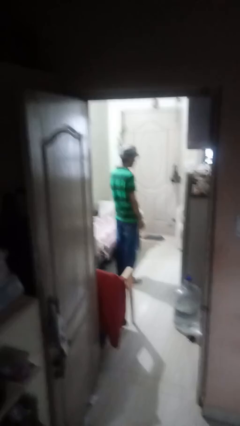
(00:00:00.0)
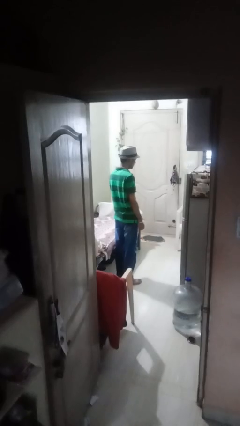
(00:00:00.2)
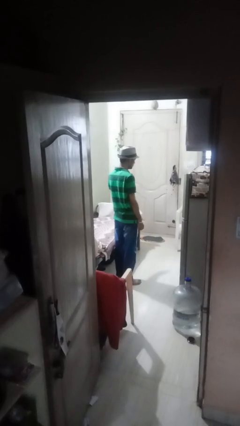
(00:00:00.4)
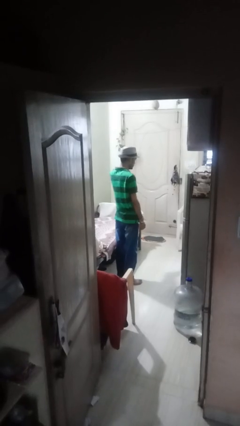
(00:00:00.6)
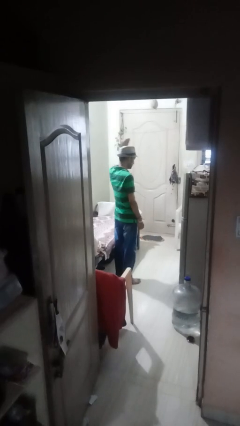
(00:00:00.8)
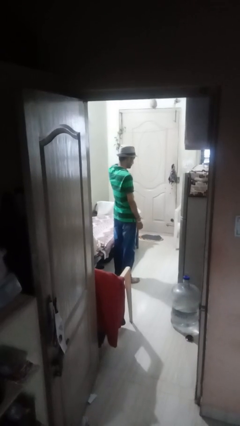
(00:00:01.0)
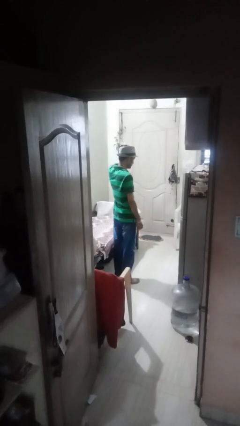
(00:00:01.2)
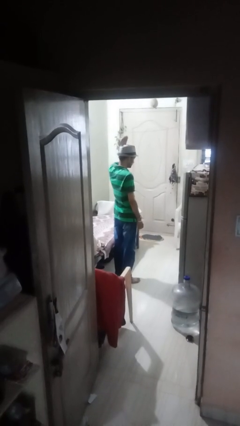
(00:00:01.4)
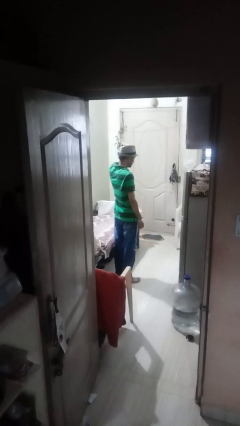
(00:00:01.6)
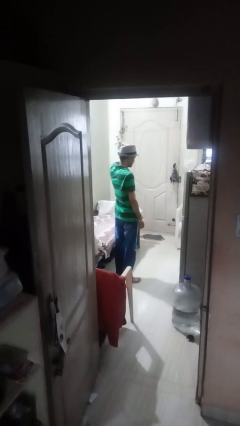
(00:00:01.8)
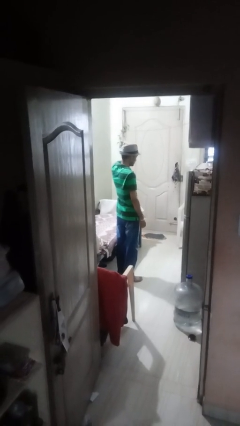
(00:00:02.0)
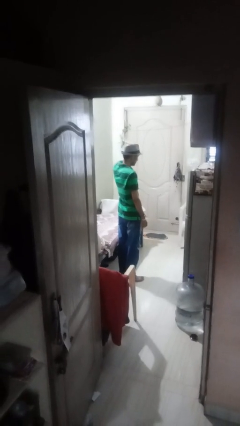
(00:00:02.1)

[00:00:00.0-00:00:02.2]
person pats head

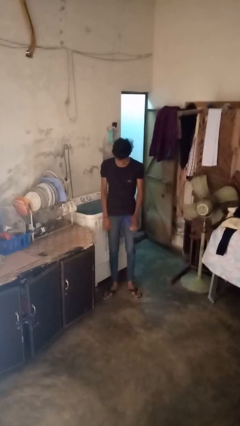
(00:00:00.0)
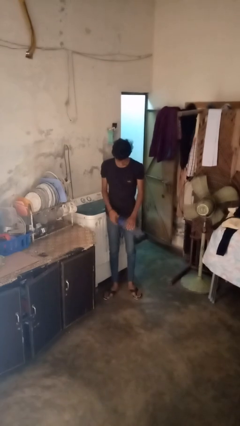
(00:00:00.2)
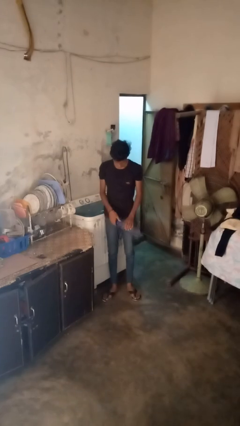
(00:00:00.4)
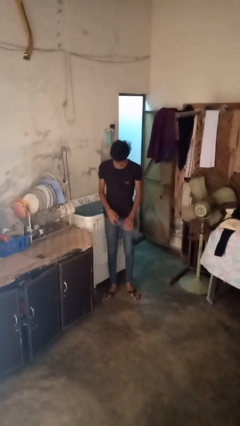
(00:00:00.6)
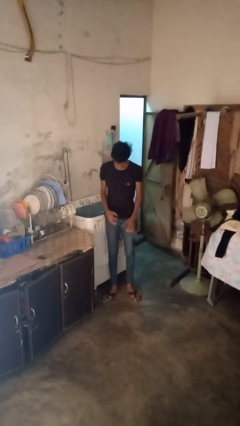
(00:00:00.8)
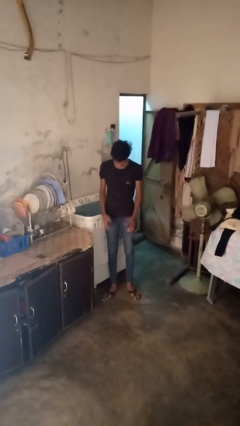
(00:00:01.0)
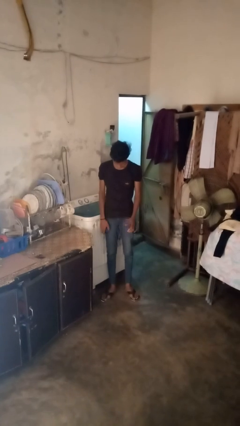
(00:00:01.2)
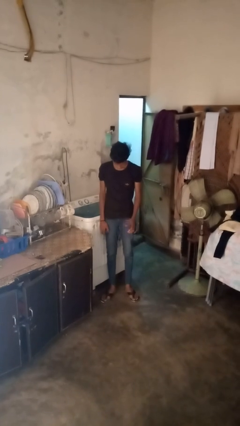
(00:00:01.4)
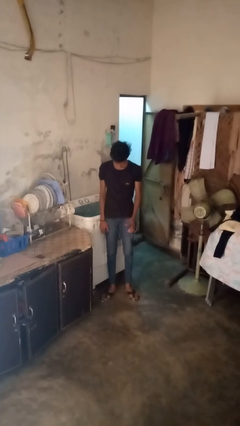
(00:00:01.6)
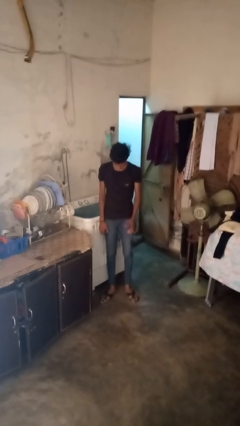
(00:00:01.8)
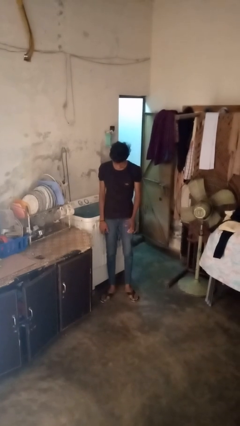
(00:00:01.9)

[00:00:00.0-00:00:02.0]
person unscrews lid from bottle

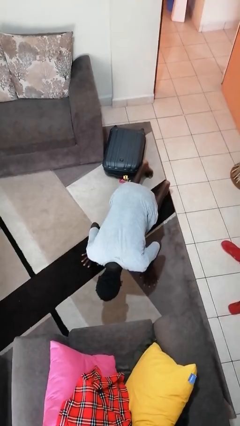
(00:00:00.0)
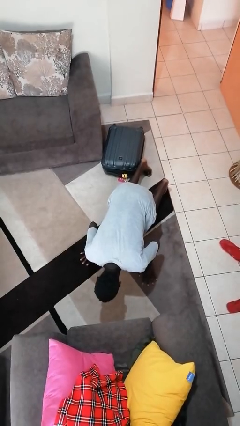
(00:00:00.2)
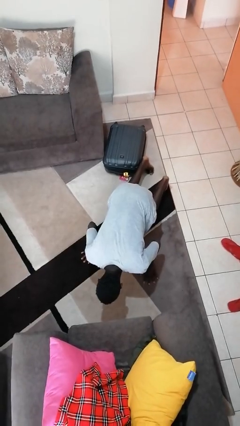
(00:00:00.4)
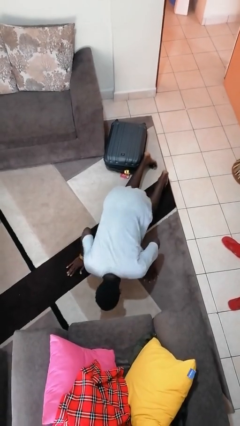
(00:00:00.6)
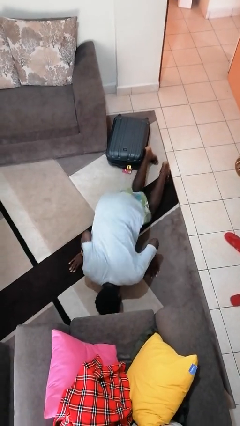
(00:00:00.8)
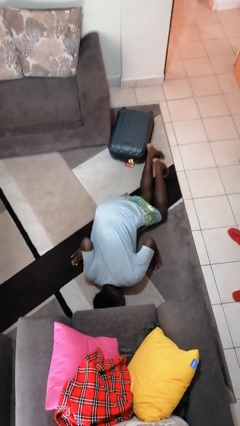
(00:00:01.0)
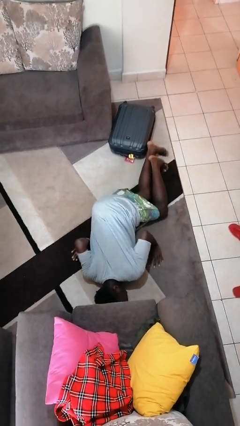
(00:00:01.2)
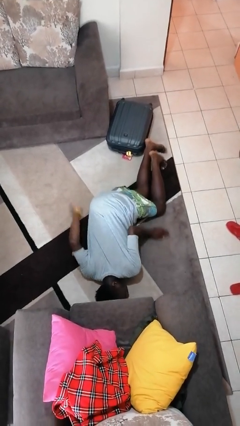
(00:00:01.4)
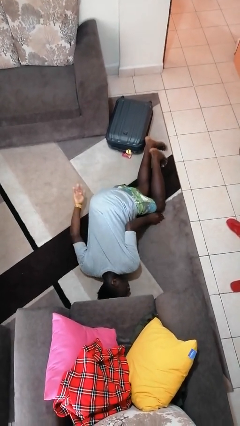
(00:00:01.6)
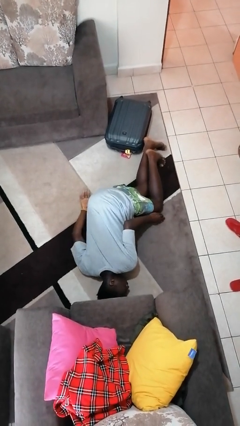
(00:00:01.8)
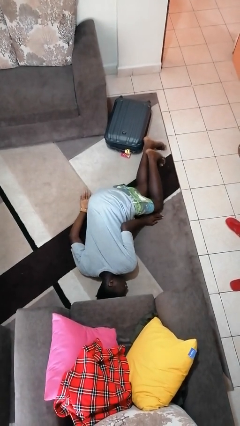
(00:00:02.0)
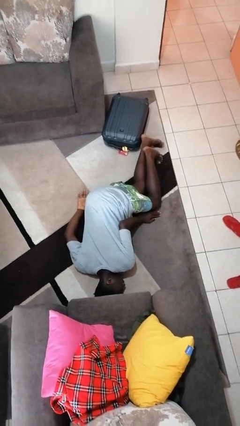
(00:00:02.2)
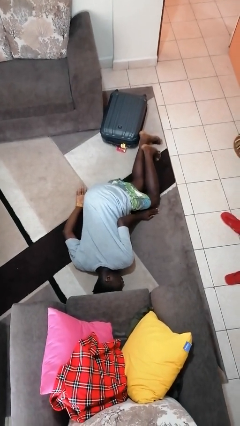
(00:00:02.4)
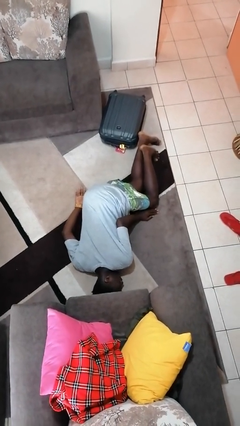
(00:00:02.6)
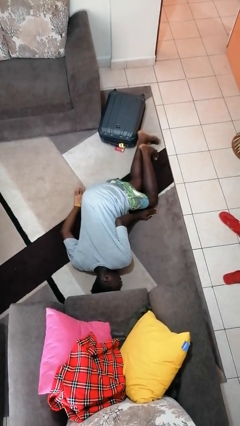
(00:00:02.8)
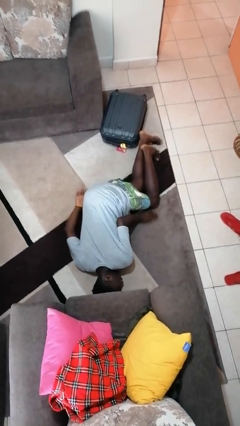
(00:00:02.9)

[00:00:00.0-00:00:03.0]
person lies down on floor

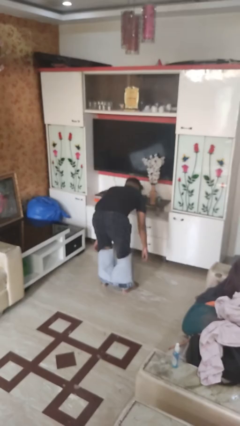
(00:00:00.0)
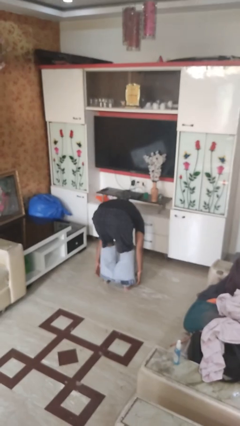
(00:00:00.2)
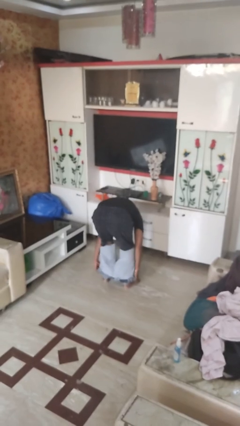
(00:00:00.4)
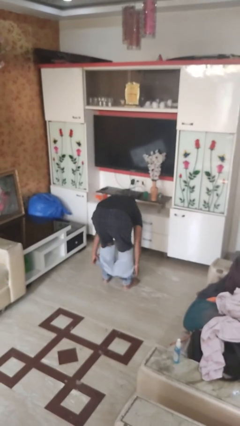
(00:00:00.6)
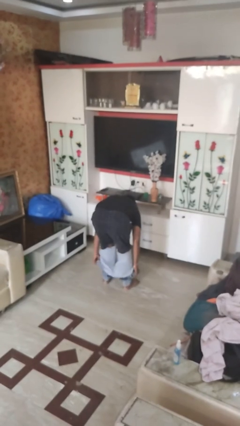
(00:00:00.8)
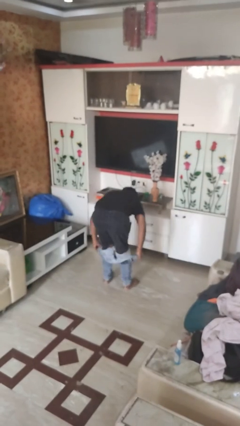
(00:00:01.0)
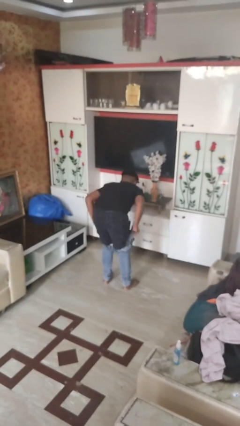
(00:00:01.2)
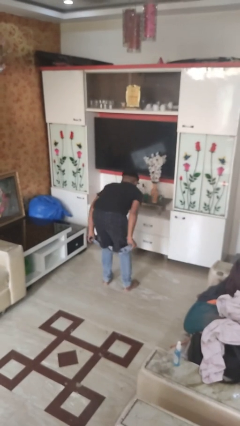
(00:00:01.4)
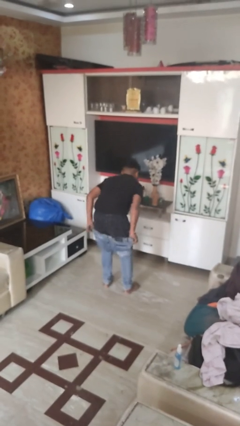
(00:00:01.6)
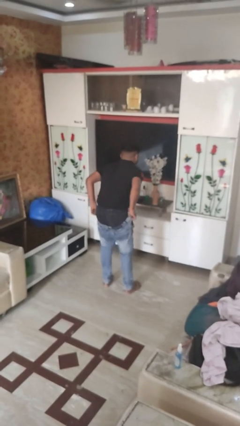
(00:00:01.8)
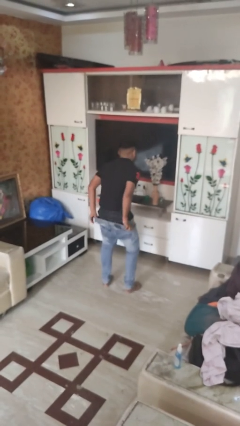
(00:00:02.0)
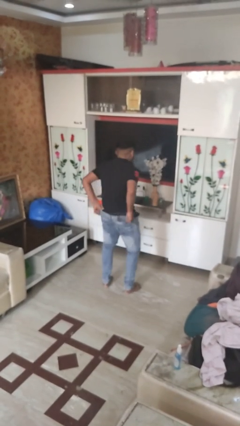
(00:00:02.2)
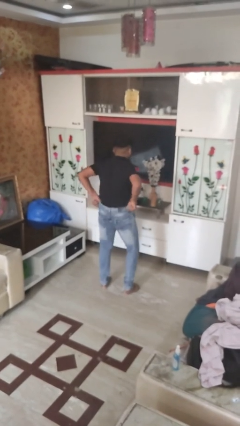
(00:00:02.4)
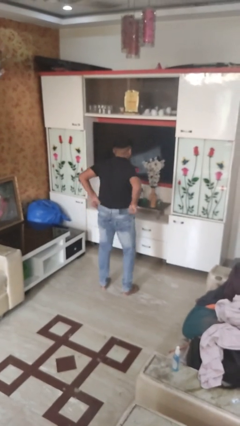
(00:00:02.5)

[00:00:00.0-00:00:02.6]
person puts on pants

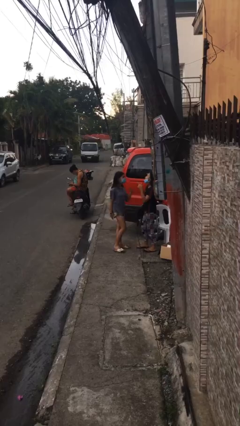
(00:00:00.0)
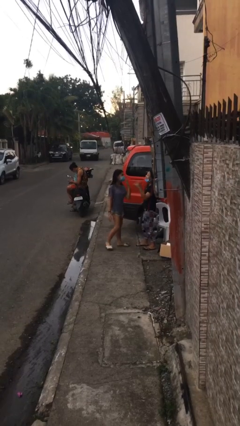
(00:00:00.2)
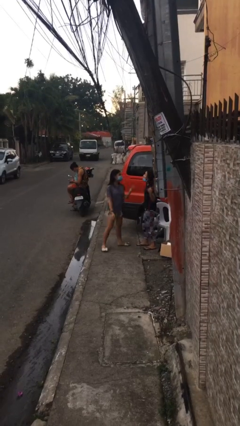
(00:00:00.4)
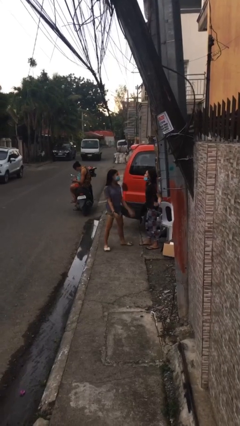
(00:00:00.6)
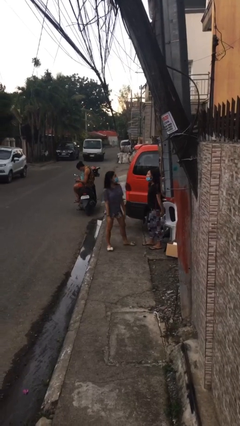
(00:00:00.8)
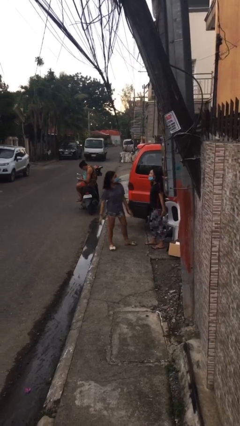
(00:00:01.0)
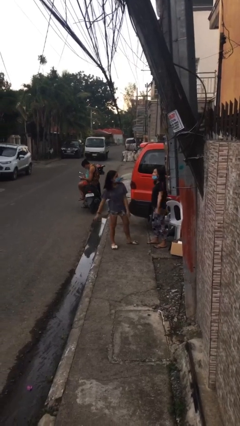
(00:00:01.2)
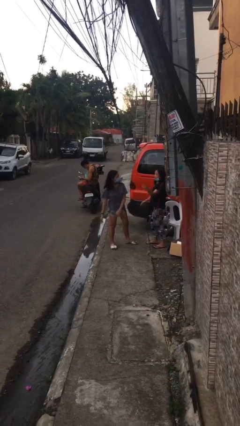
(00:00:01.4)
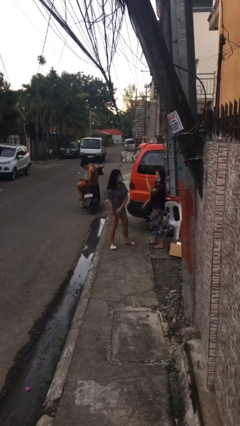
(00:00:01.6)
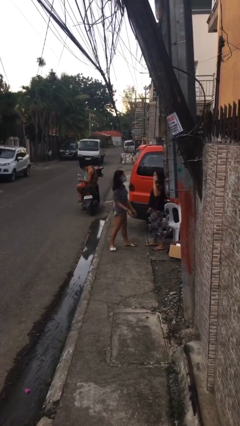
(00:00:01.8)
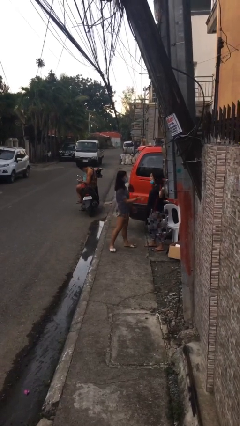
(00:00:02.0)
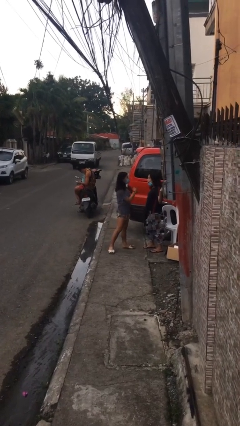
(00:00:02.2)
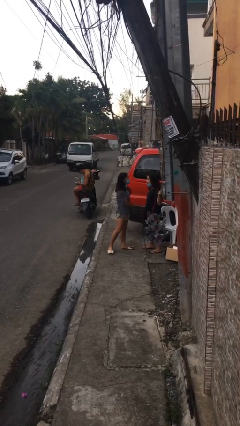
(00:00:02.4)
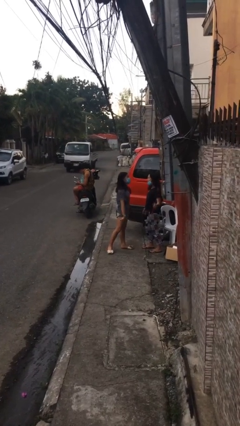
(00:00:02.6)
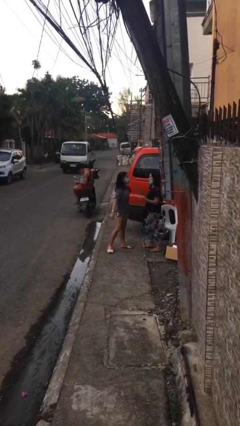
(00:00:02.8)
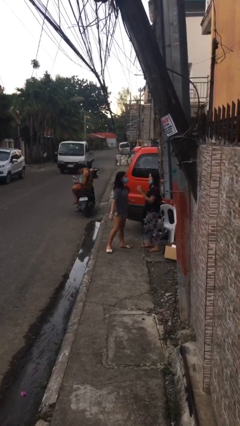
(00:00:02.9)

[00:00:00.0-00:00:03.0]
person talks to person

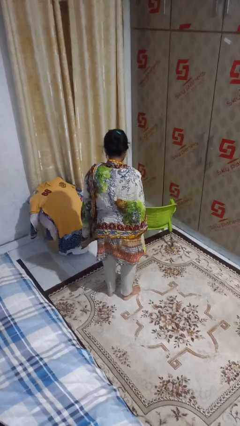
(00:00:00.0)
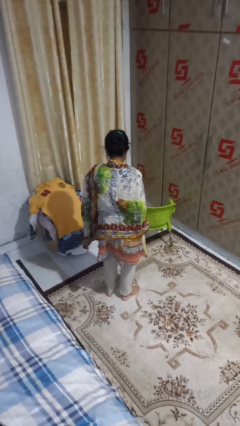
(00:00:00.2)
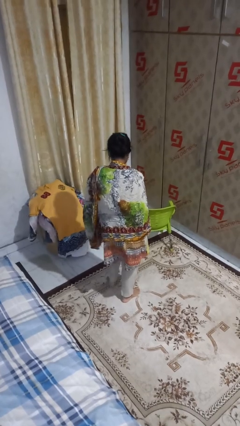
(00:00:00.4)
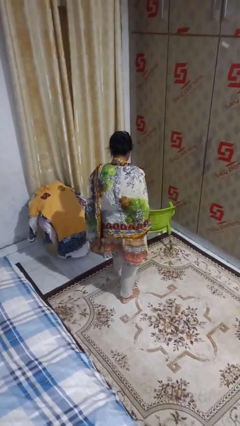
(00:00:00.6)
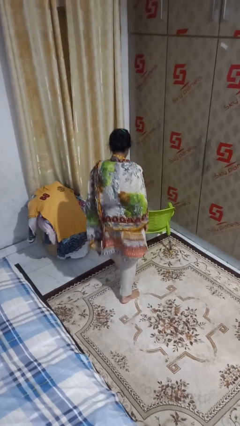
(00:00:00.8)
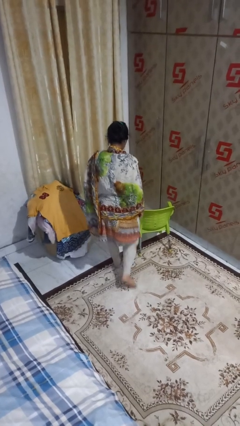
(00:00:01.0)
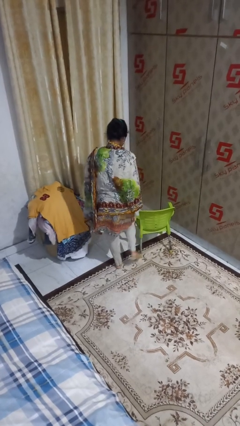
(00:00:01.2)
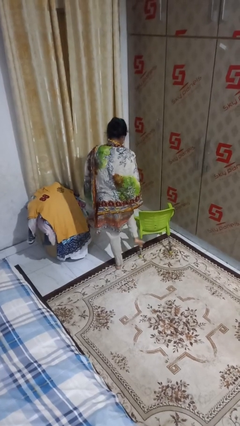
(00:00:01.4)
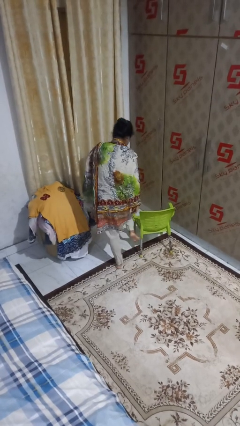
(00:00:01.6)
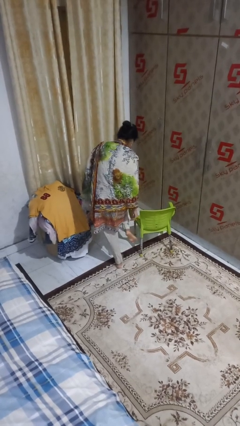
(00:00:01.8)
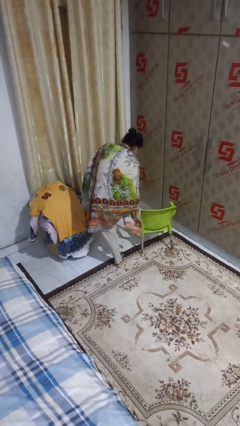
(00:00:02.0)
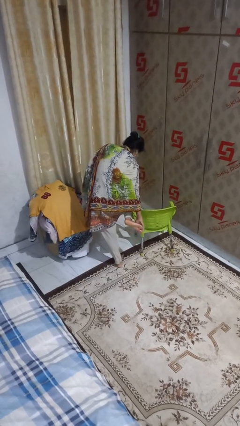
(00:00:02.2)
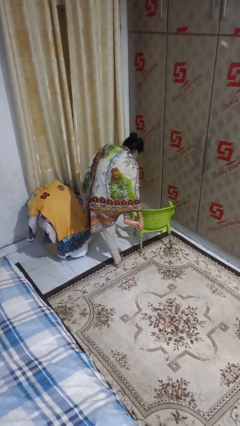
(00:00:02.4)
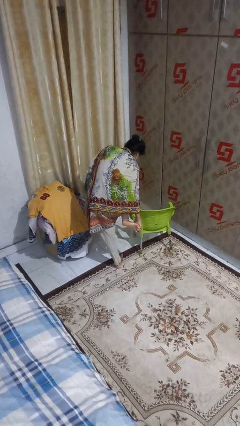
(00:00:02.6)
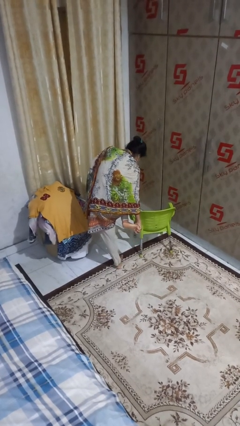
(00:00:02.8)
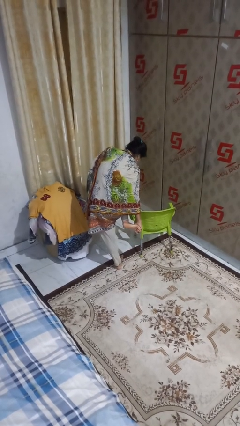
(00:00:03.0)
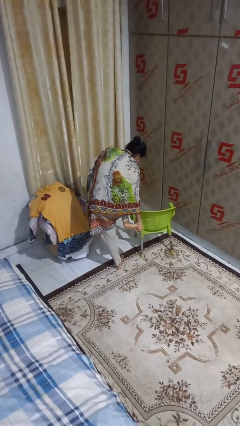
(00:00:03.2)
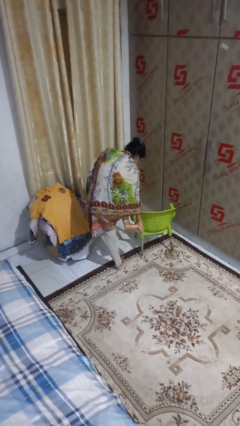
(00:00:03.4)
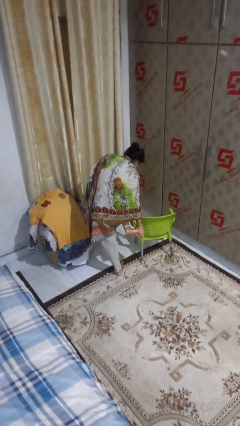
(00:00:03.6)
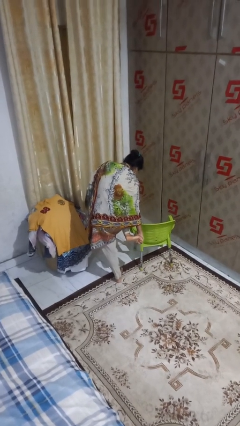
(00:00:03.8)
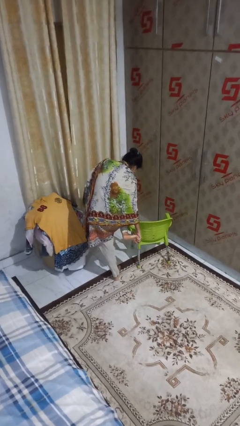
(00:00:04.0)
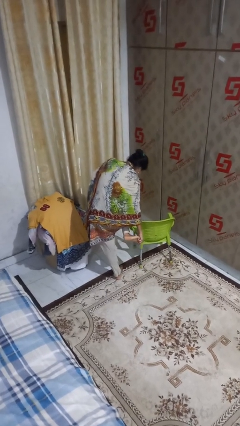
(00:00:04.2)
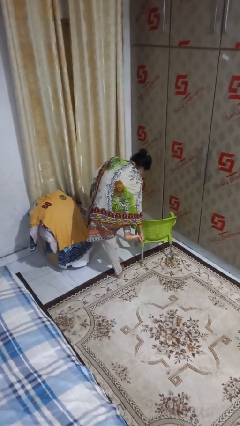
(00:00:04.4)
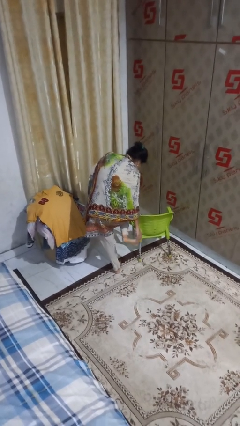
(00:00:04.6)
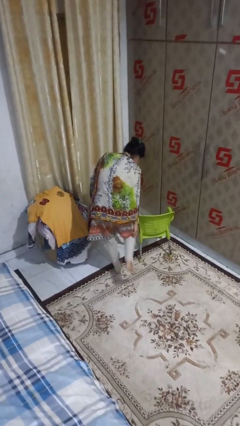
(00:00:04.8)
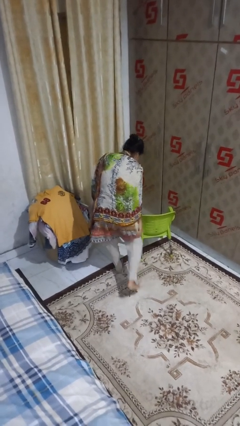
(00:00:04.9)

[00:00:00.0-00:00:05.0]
person stubs toe
